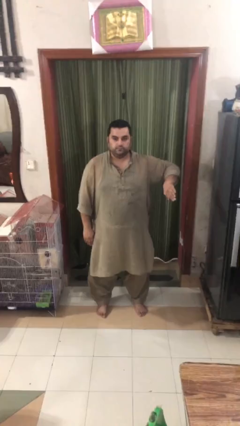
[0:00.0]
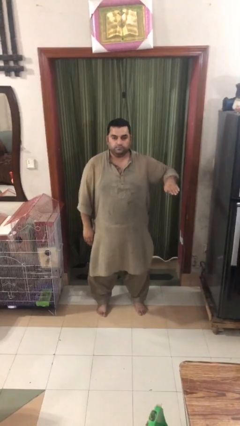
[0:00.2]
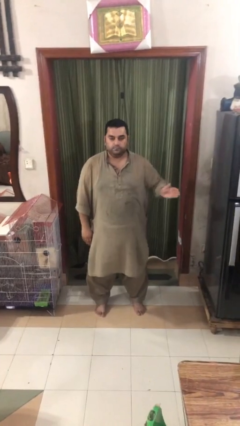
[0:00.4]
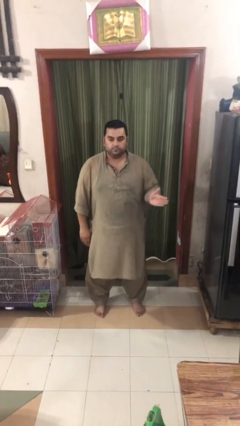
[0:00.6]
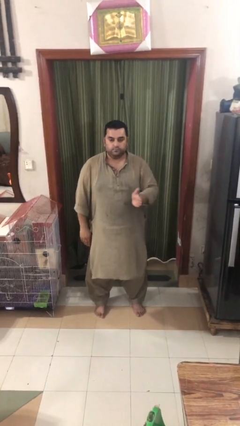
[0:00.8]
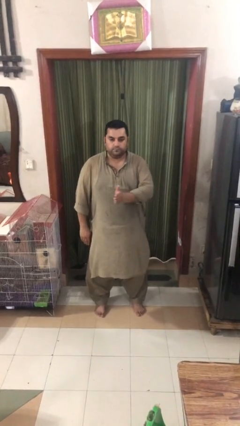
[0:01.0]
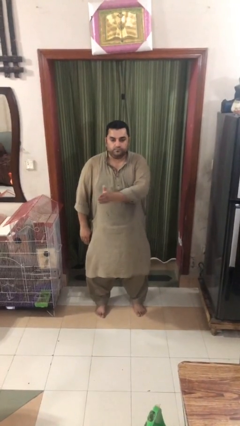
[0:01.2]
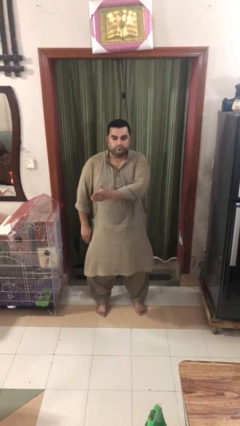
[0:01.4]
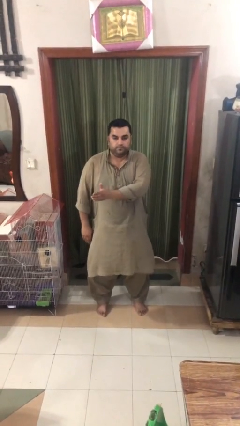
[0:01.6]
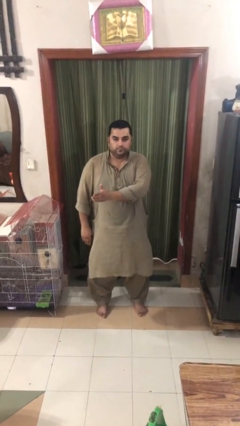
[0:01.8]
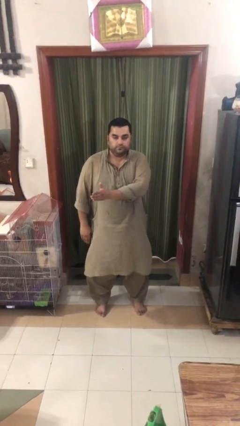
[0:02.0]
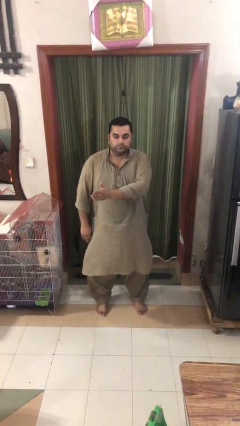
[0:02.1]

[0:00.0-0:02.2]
person gestures swipe right

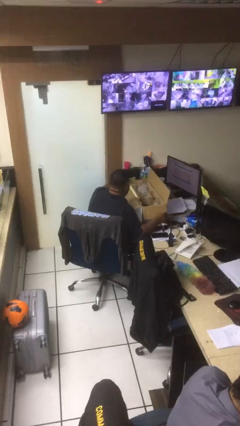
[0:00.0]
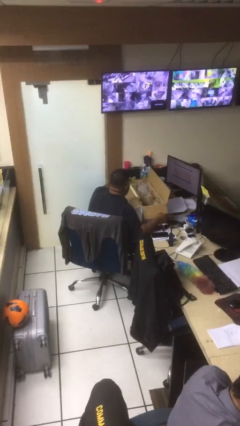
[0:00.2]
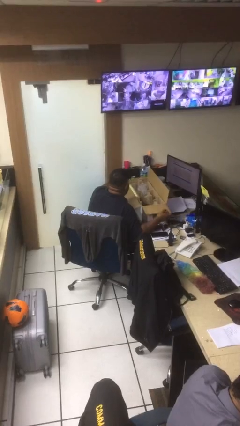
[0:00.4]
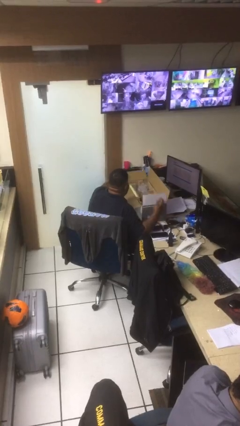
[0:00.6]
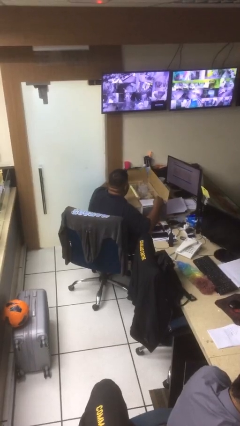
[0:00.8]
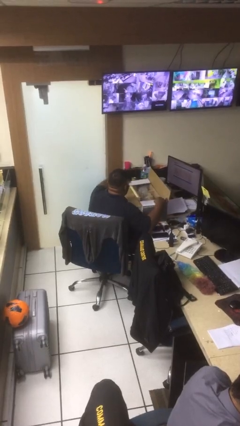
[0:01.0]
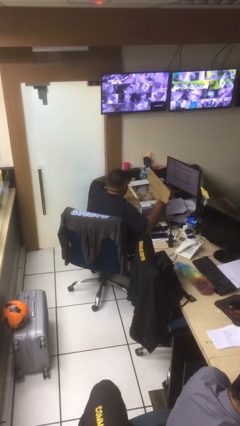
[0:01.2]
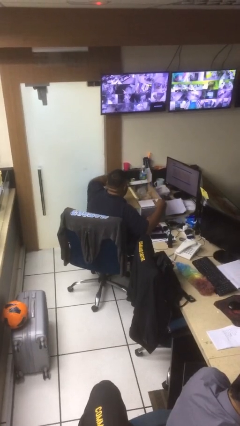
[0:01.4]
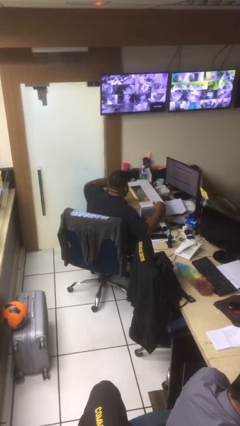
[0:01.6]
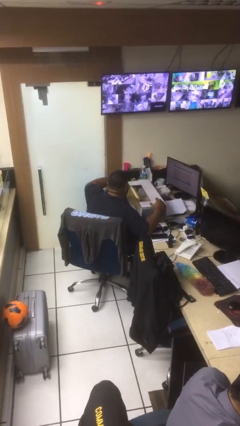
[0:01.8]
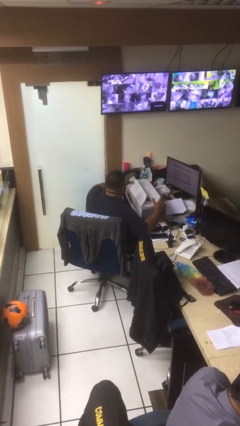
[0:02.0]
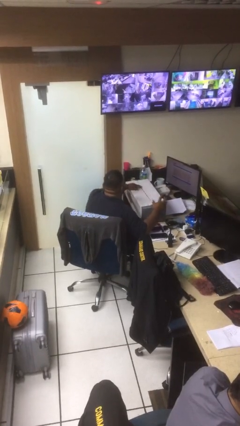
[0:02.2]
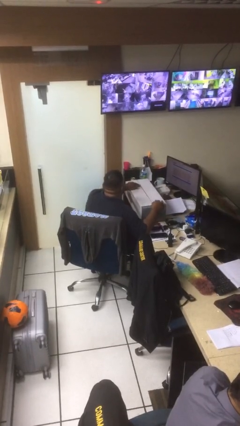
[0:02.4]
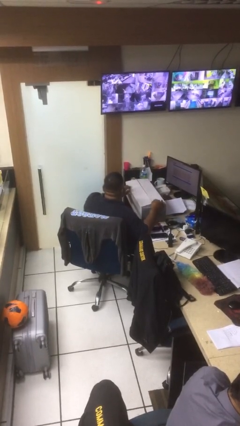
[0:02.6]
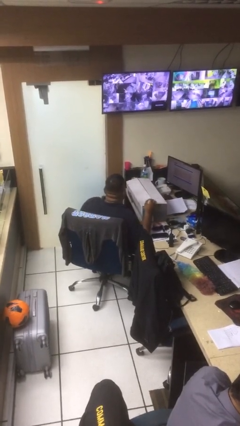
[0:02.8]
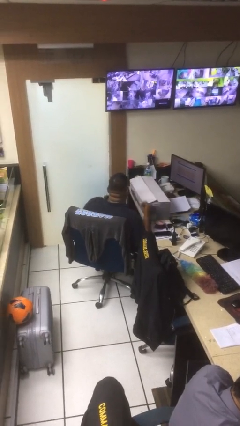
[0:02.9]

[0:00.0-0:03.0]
person closes box

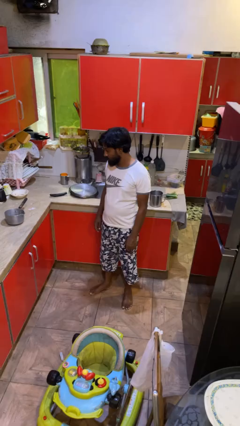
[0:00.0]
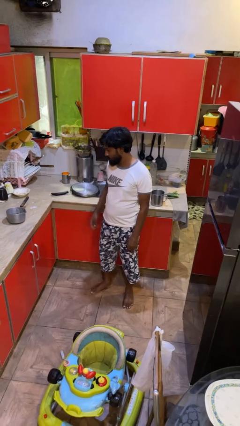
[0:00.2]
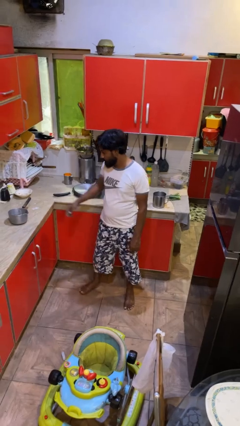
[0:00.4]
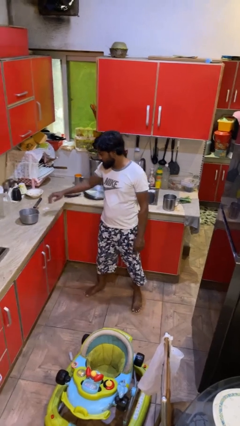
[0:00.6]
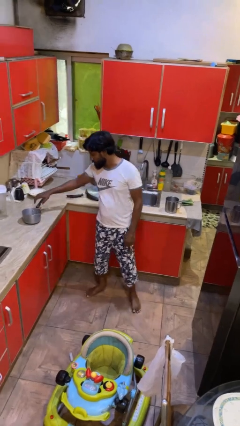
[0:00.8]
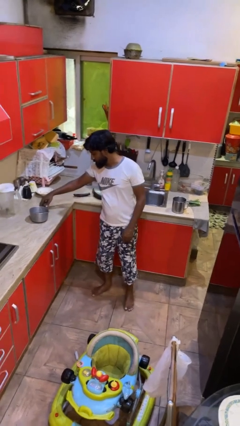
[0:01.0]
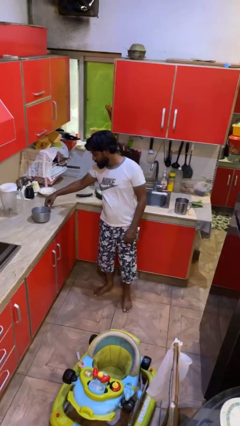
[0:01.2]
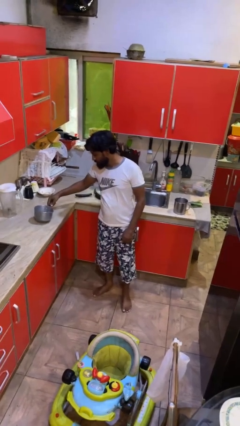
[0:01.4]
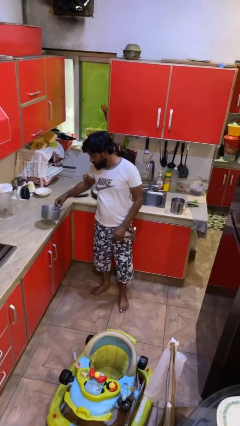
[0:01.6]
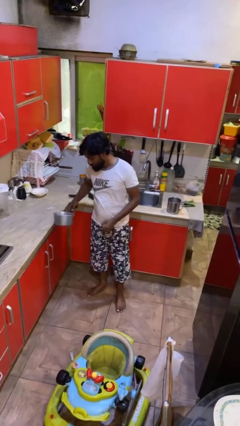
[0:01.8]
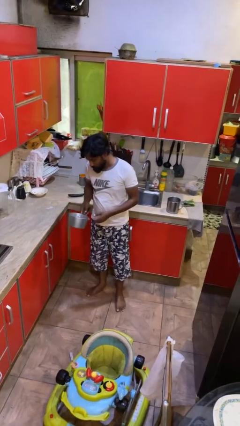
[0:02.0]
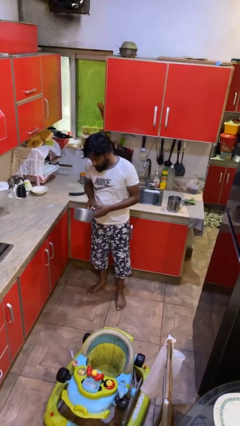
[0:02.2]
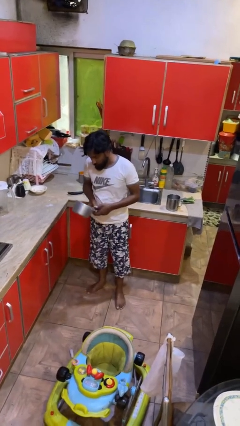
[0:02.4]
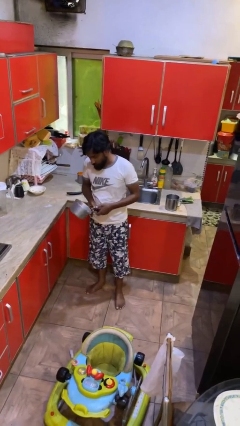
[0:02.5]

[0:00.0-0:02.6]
person picks up object from countertop

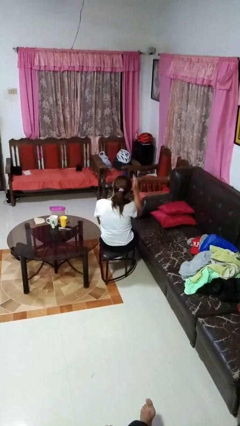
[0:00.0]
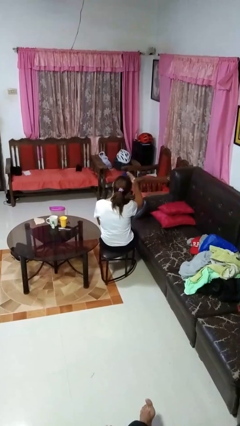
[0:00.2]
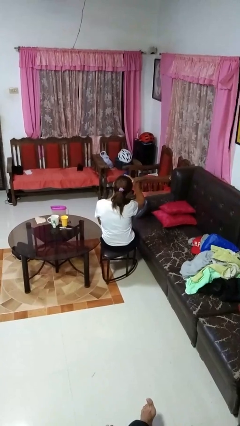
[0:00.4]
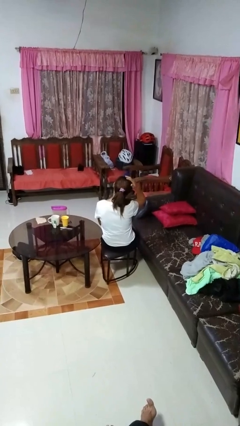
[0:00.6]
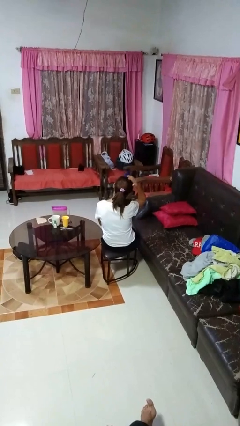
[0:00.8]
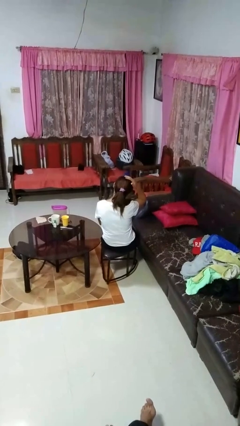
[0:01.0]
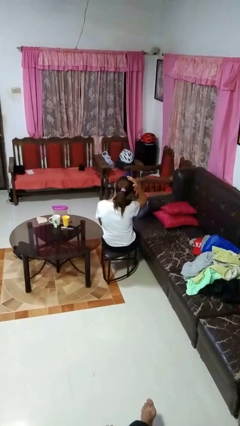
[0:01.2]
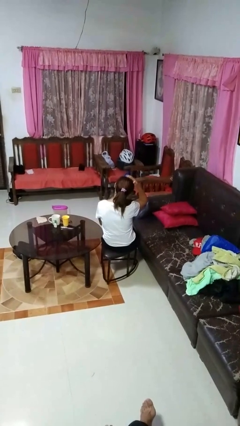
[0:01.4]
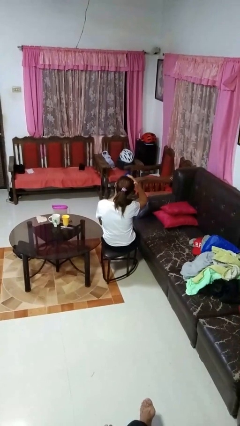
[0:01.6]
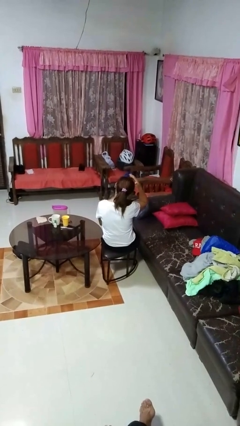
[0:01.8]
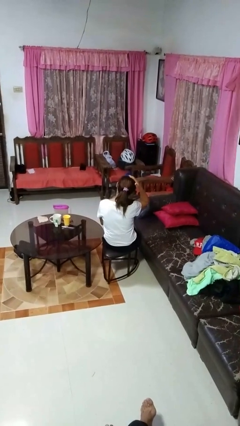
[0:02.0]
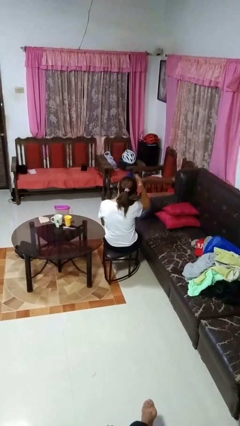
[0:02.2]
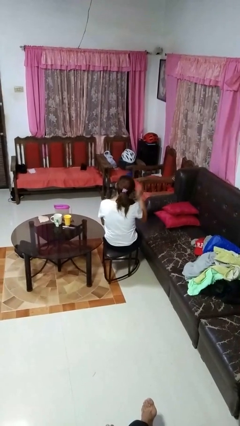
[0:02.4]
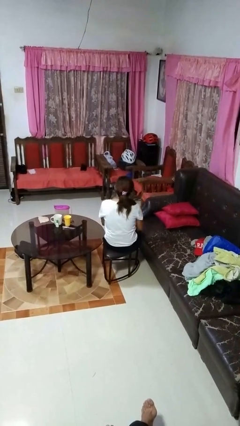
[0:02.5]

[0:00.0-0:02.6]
person pats head

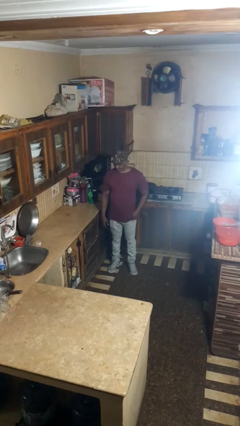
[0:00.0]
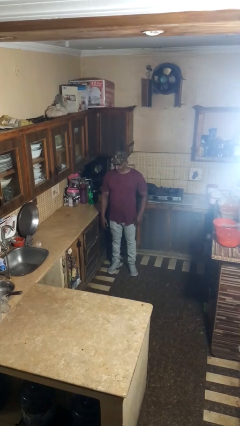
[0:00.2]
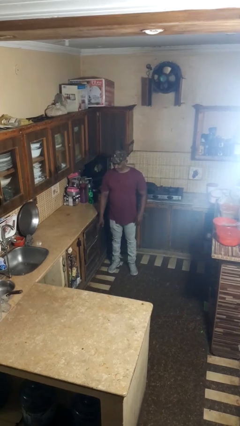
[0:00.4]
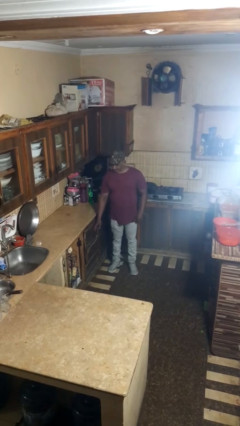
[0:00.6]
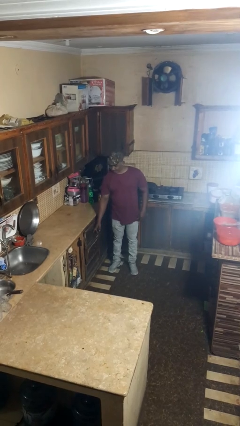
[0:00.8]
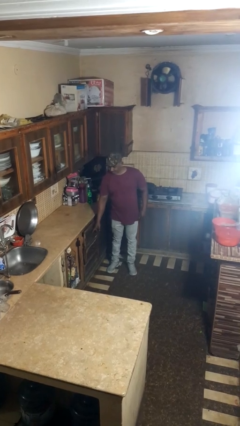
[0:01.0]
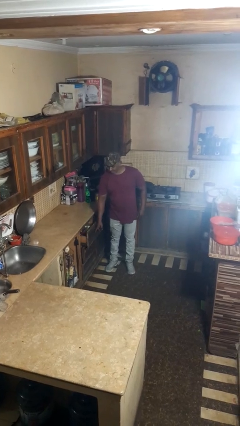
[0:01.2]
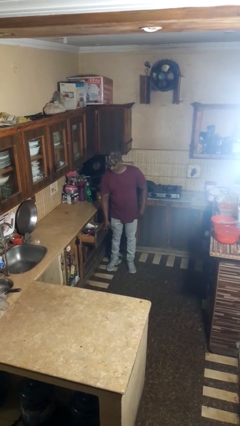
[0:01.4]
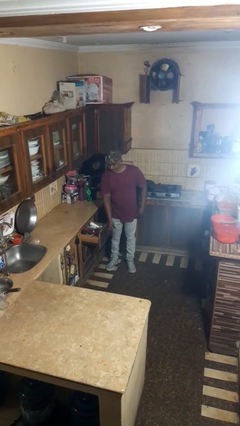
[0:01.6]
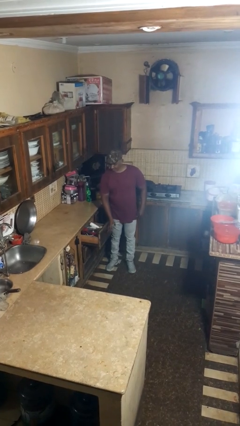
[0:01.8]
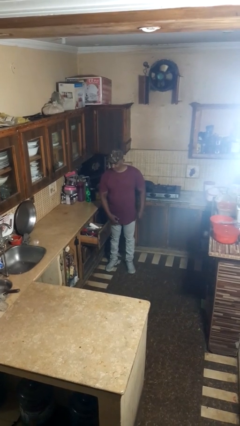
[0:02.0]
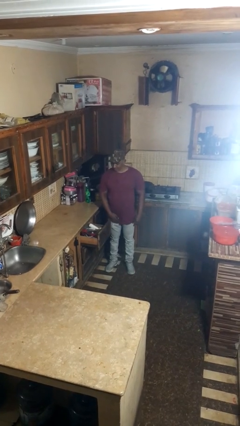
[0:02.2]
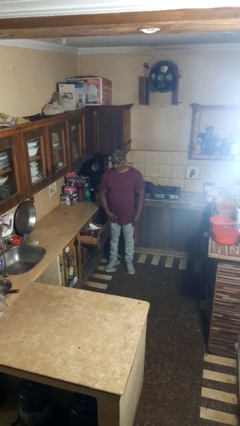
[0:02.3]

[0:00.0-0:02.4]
person opens kitchen drawer

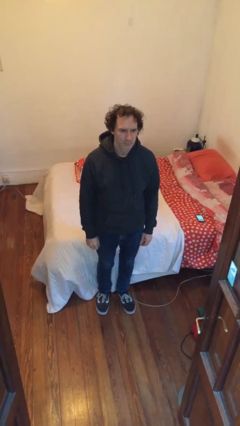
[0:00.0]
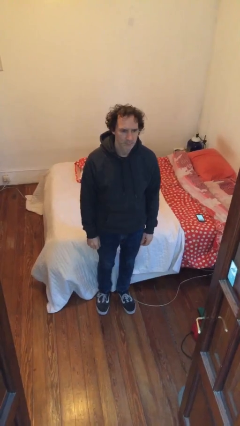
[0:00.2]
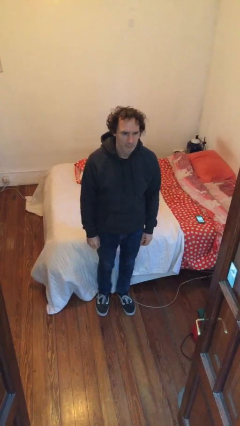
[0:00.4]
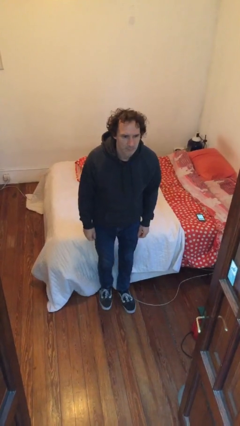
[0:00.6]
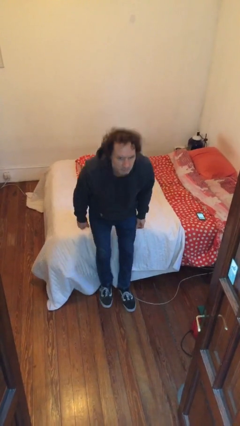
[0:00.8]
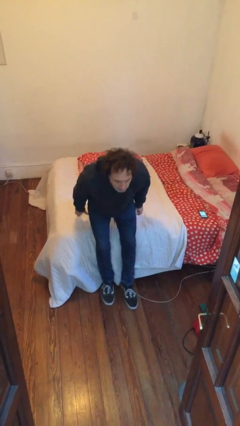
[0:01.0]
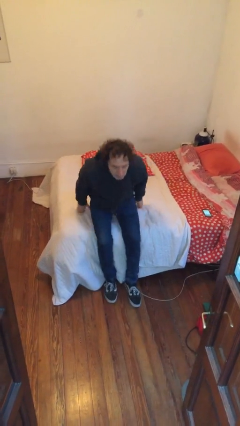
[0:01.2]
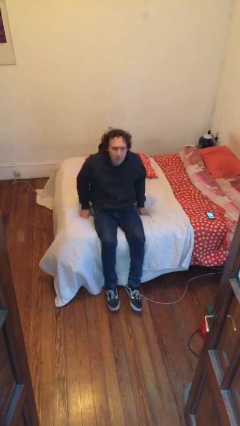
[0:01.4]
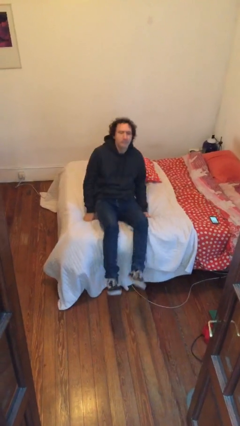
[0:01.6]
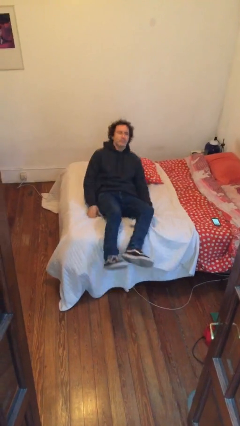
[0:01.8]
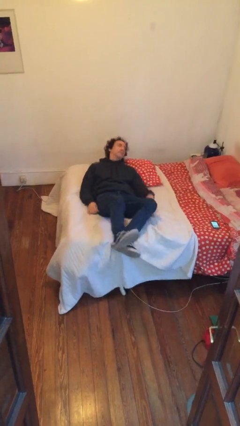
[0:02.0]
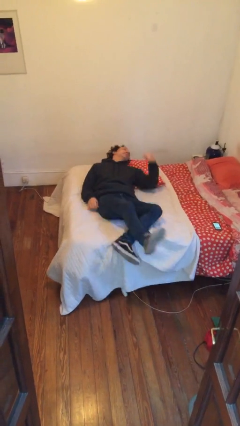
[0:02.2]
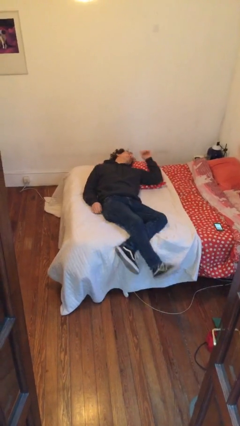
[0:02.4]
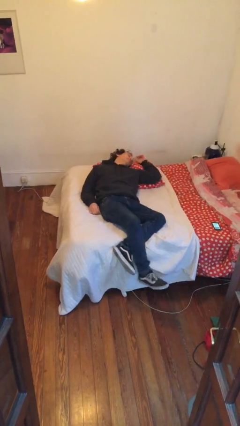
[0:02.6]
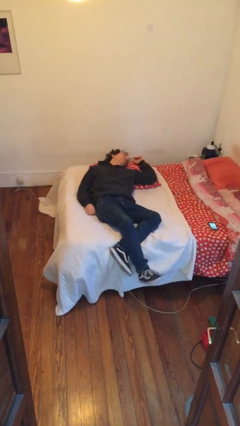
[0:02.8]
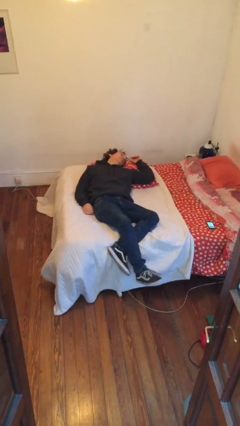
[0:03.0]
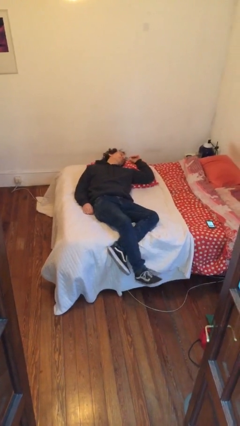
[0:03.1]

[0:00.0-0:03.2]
person lies down on bed

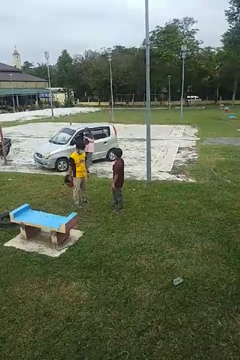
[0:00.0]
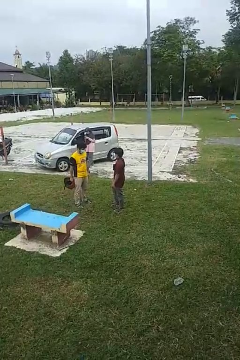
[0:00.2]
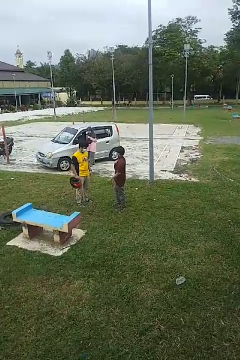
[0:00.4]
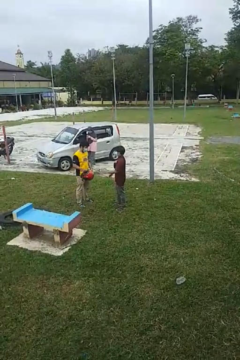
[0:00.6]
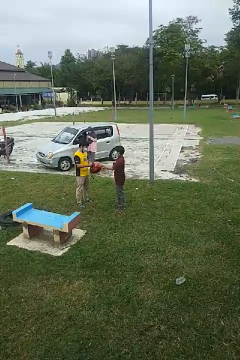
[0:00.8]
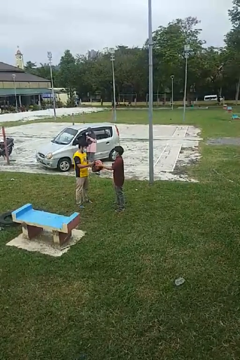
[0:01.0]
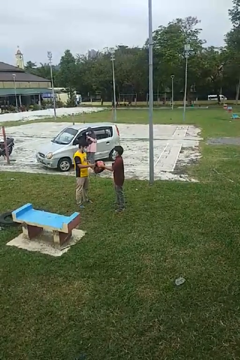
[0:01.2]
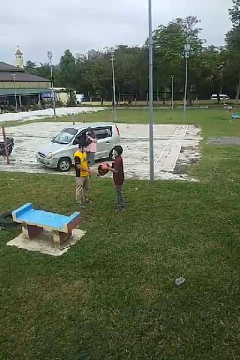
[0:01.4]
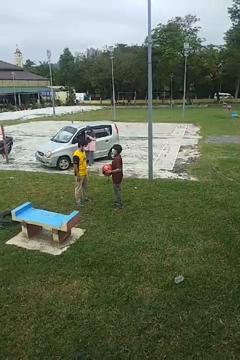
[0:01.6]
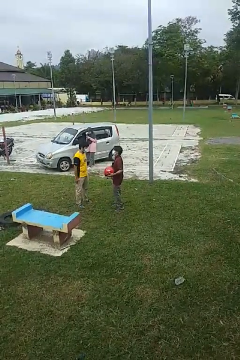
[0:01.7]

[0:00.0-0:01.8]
person transfers object to person
